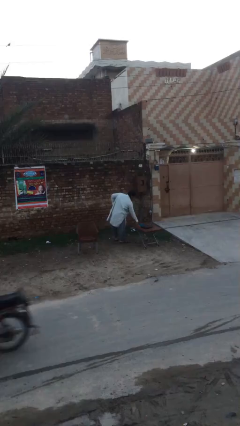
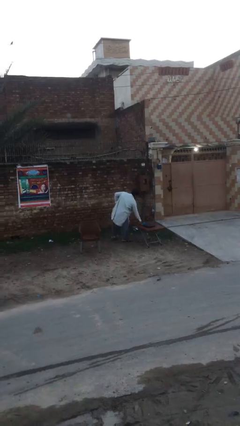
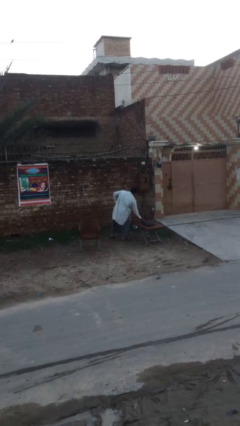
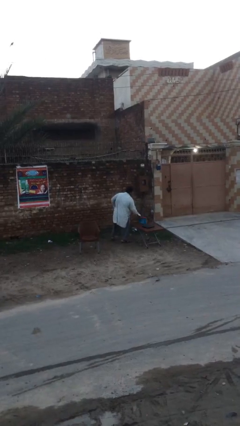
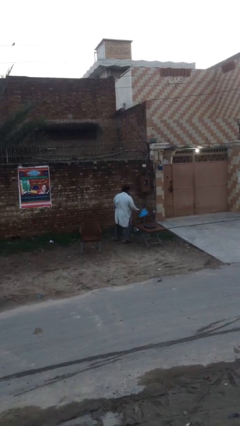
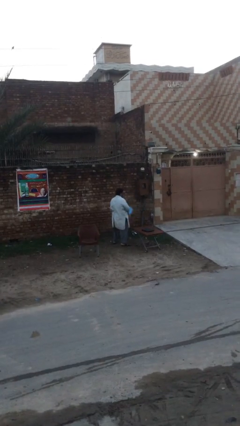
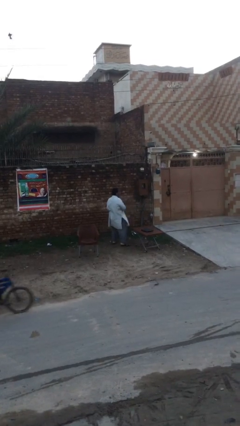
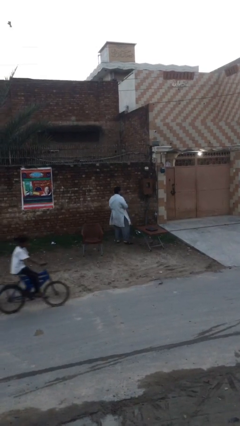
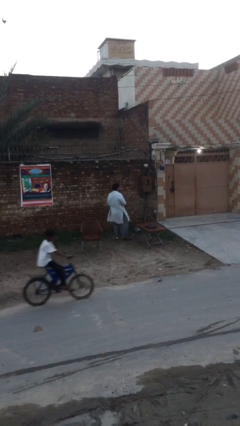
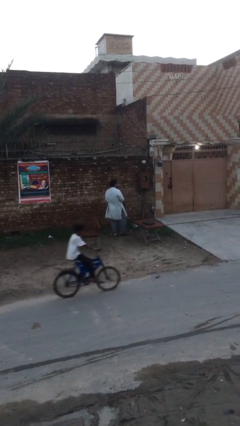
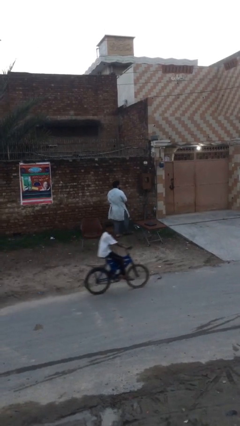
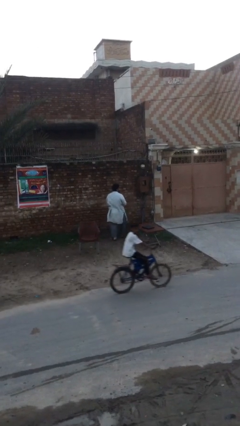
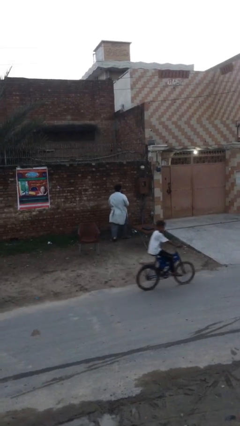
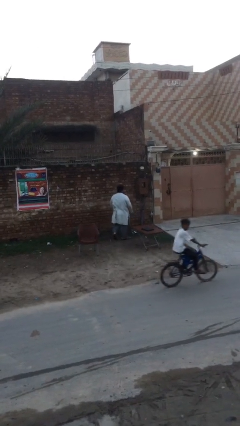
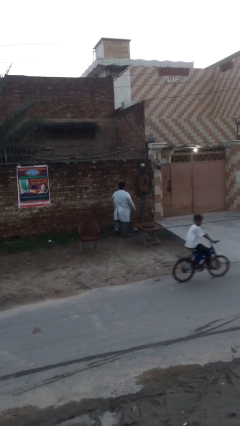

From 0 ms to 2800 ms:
person picks up object from table

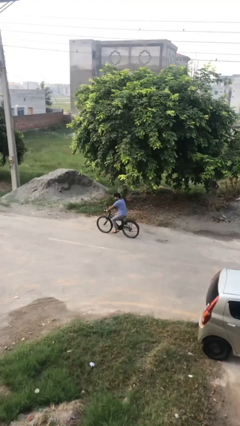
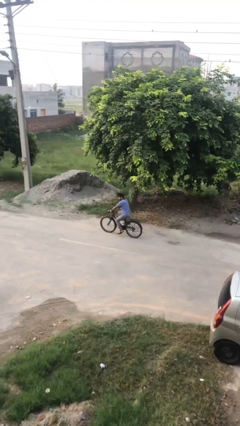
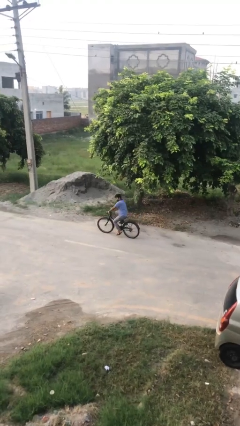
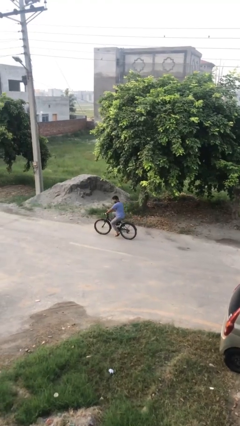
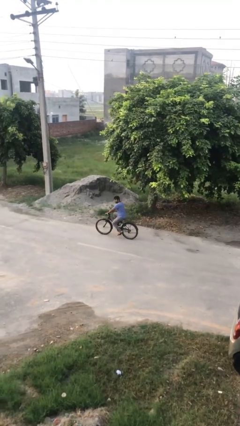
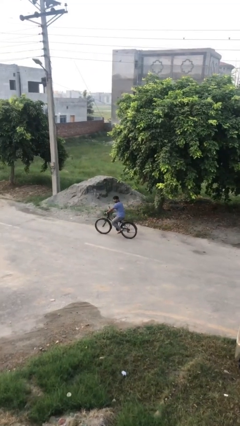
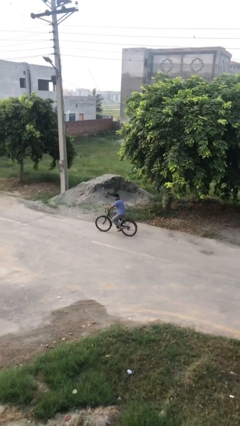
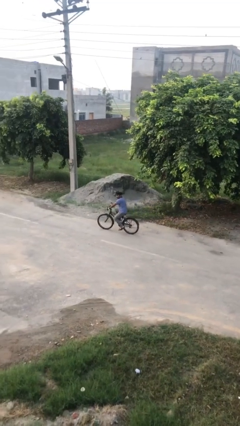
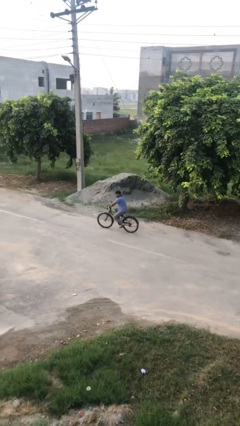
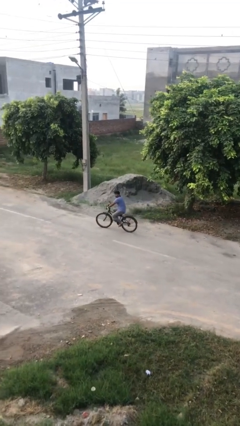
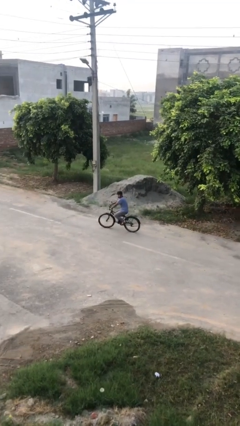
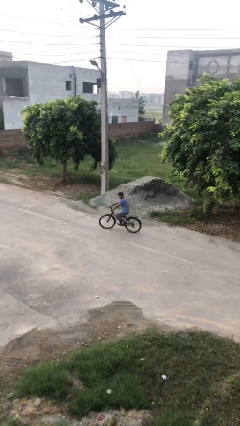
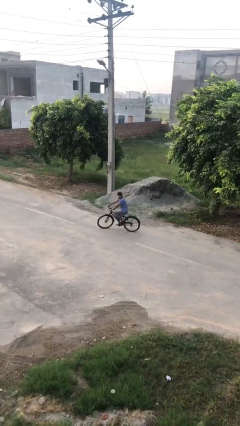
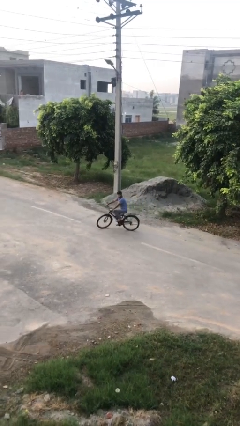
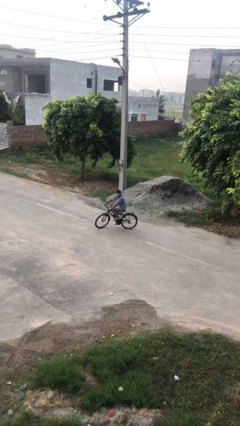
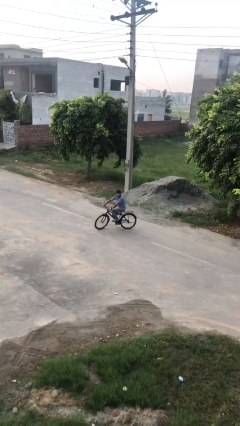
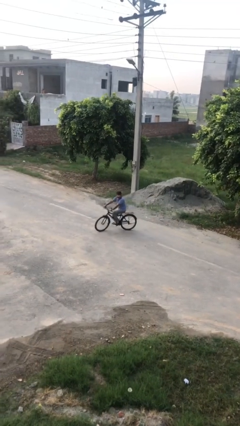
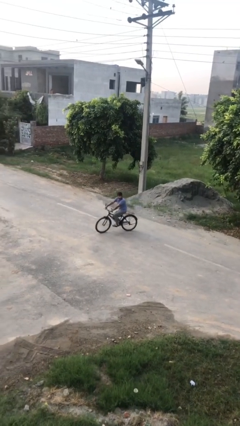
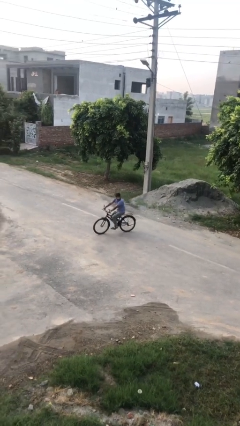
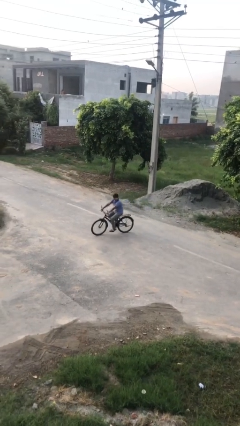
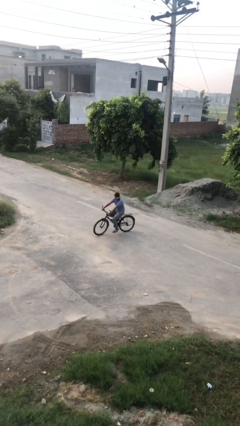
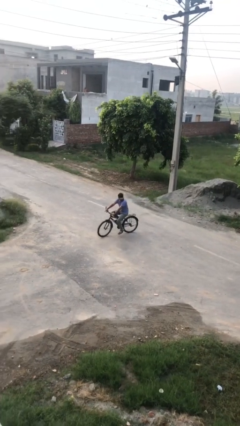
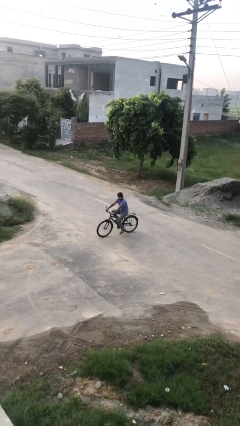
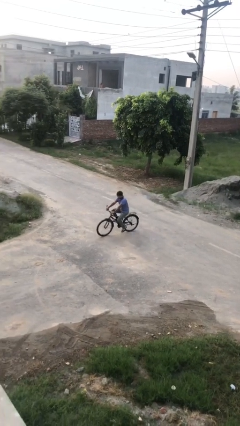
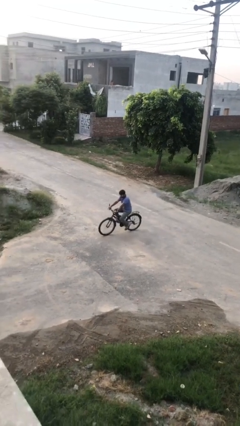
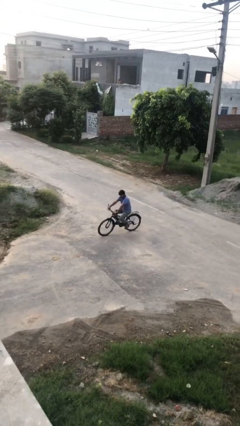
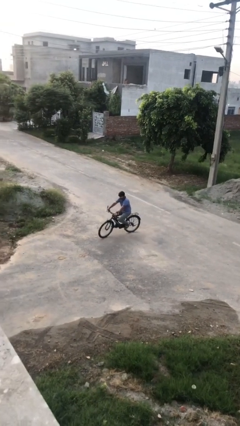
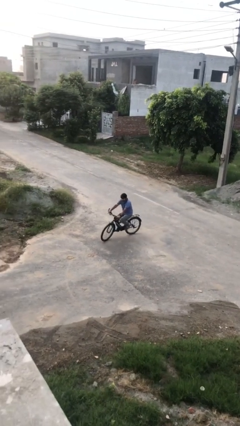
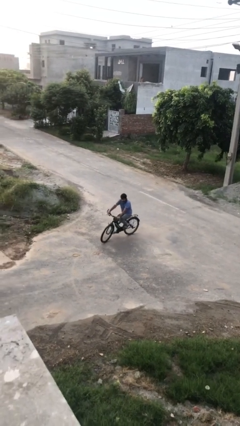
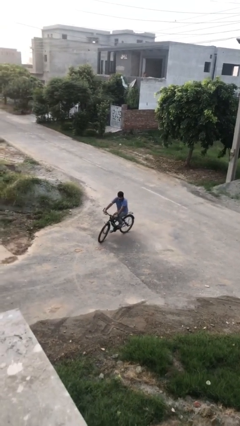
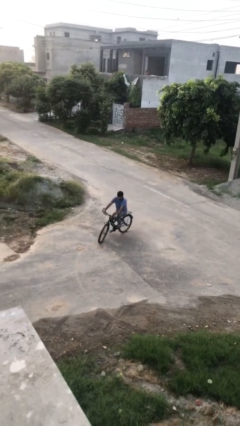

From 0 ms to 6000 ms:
person rides bicycle

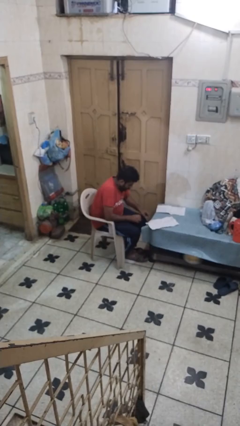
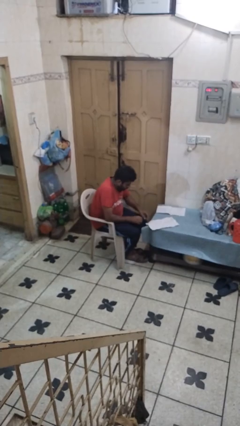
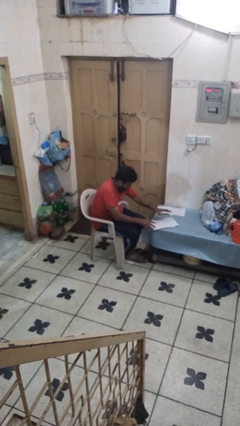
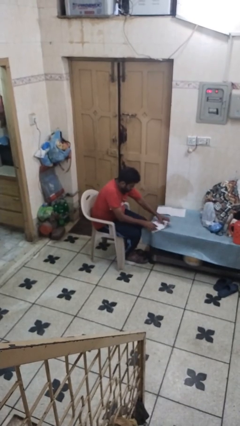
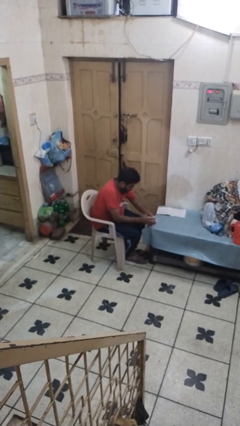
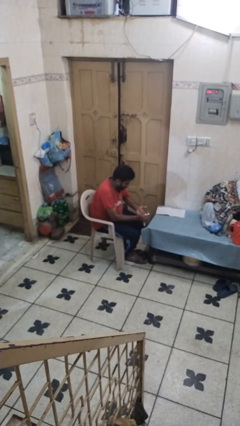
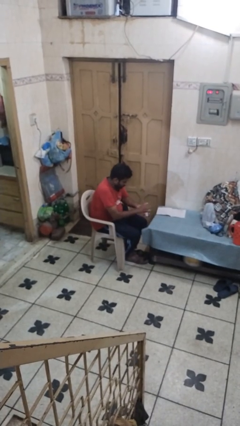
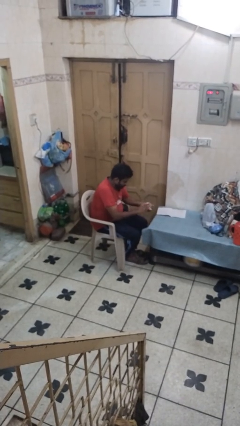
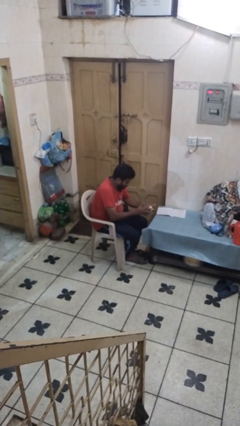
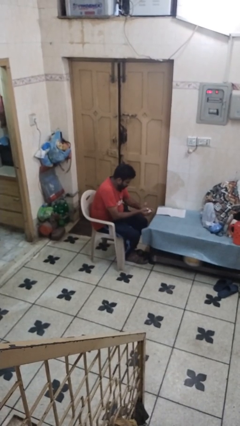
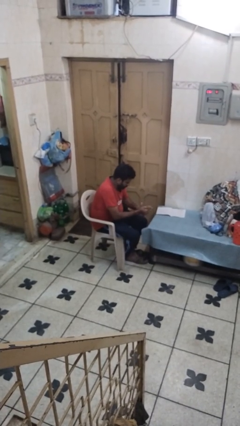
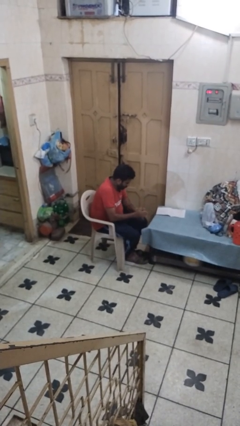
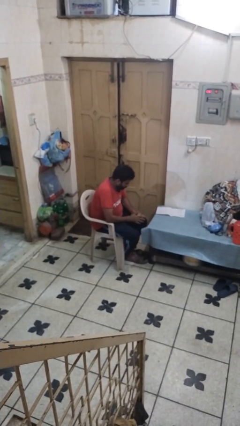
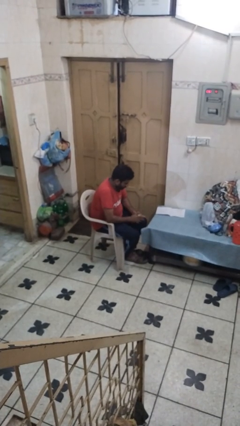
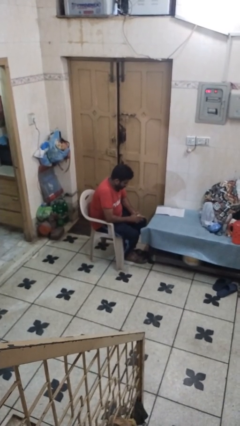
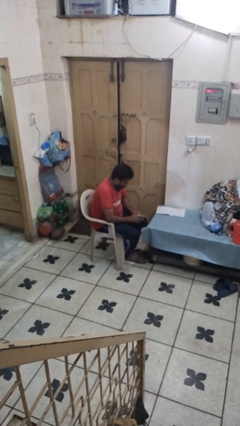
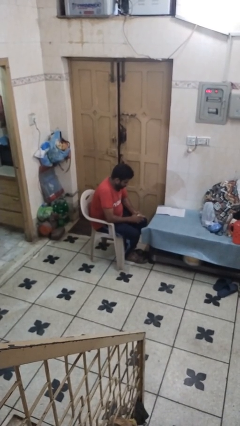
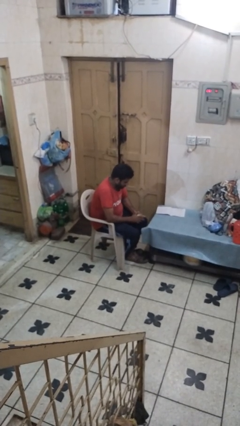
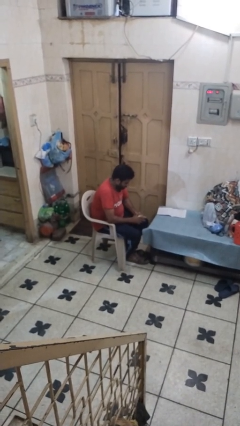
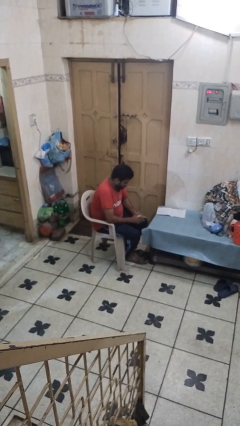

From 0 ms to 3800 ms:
person crumples paper

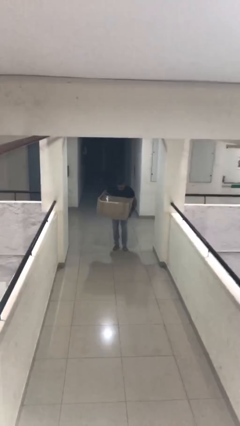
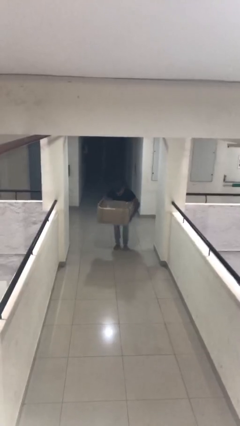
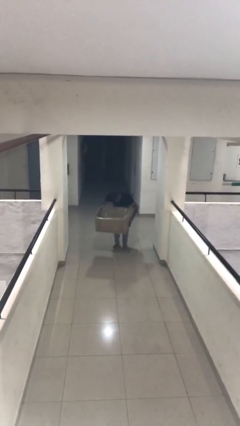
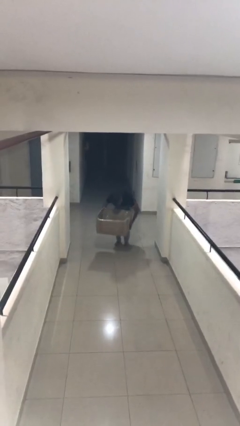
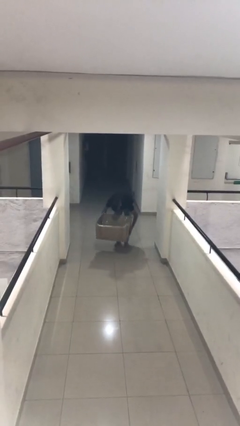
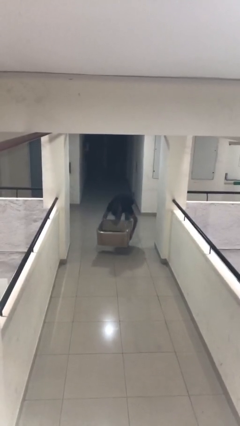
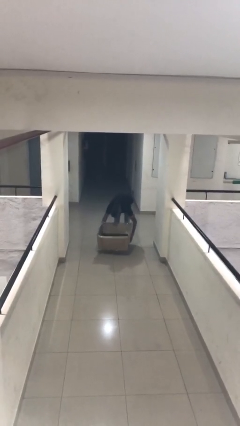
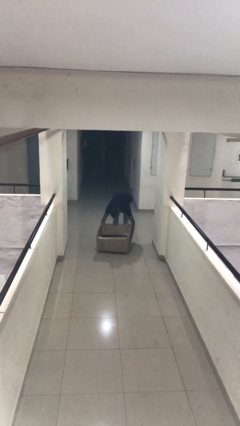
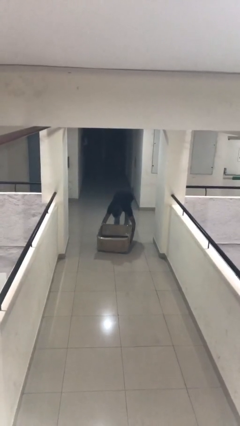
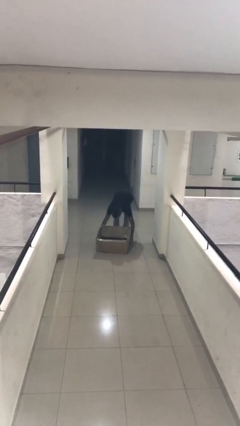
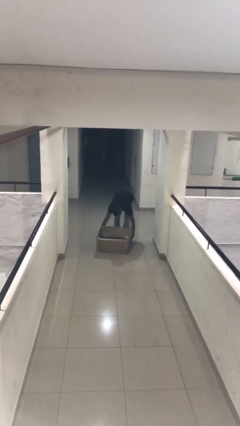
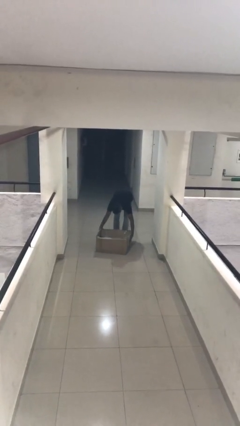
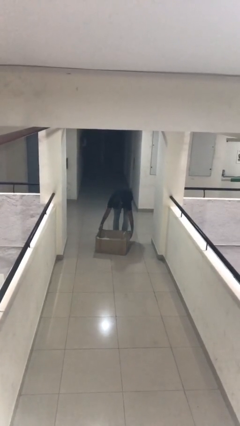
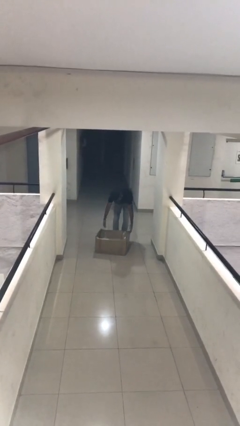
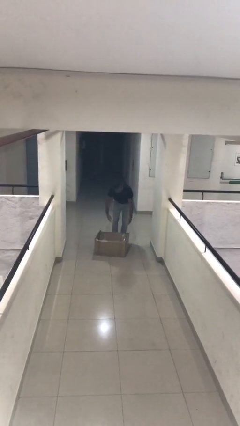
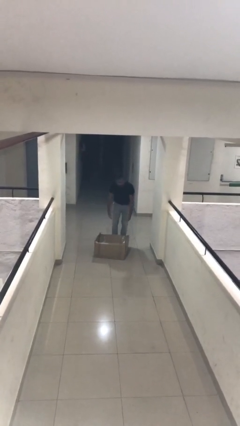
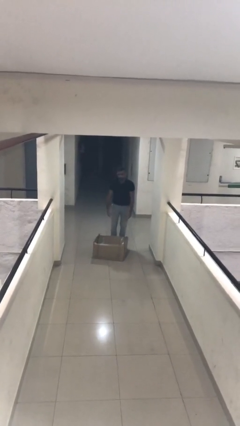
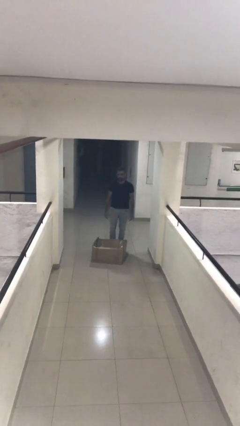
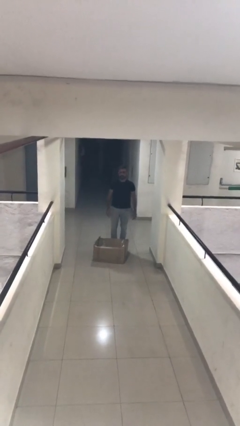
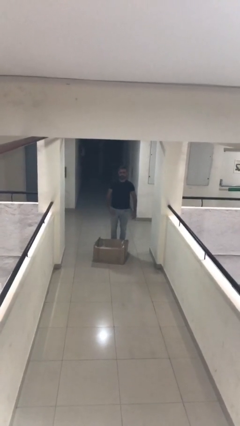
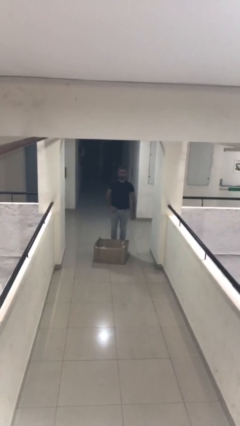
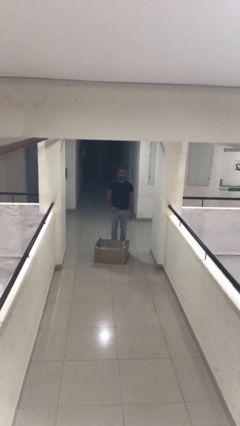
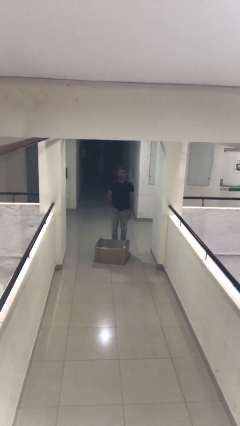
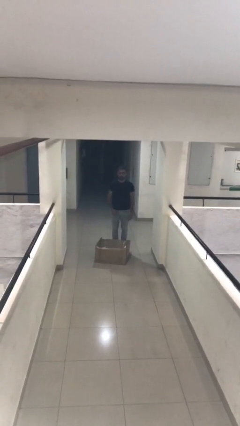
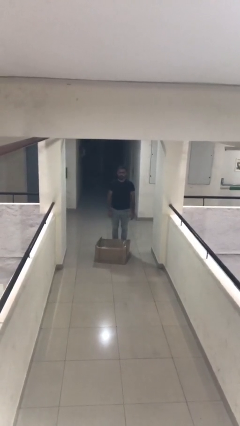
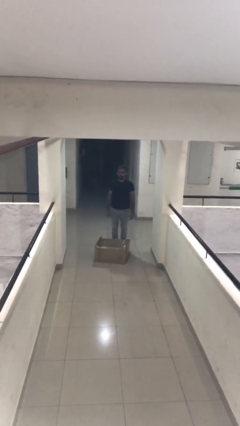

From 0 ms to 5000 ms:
person puts down object on floor

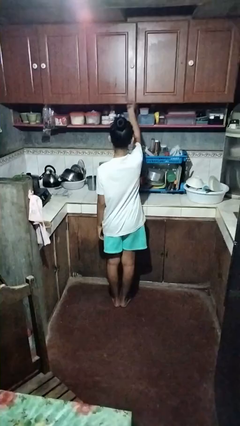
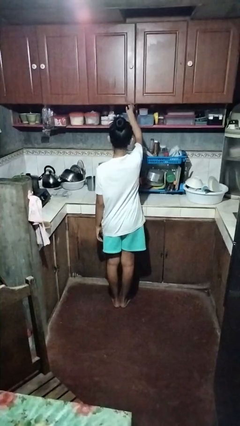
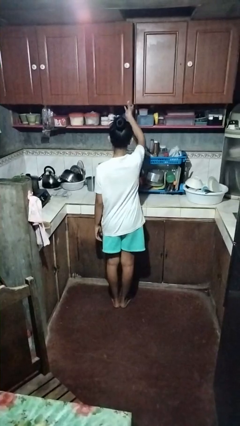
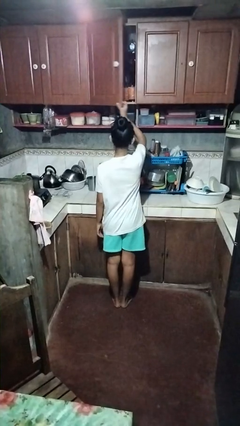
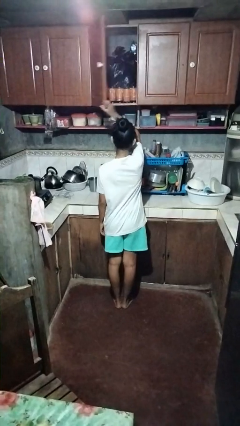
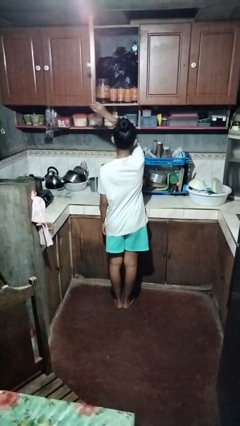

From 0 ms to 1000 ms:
person opens cabinet
